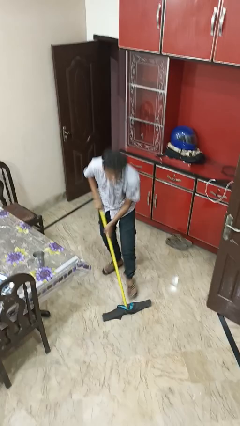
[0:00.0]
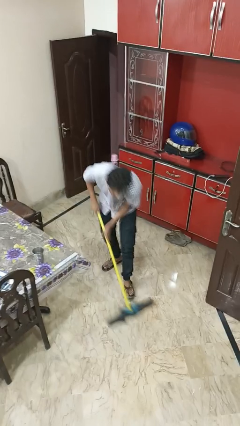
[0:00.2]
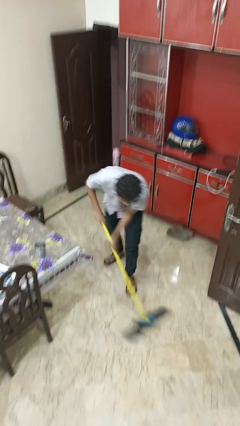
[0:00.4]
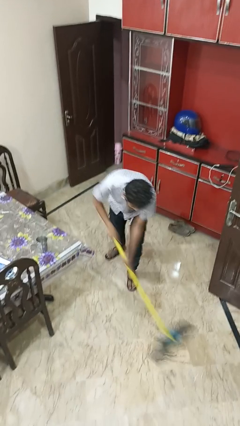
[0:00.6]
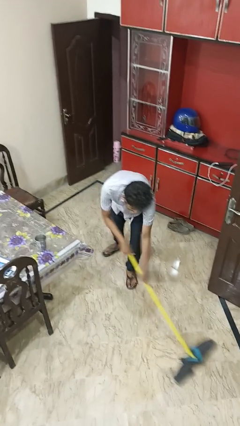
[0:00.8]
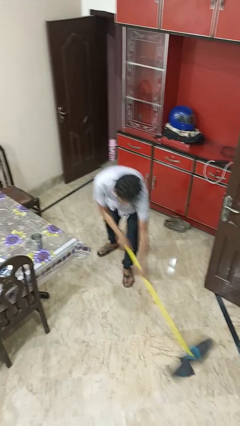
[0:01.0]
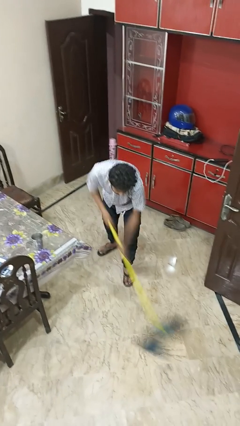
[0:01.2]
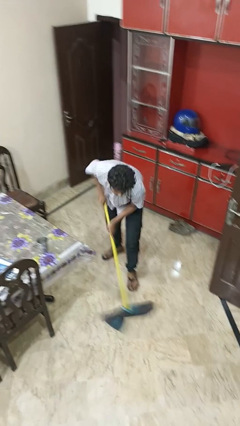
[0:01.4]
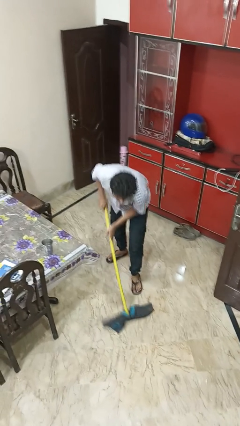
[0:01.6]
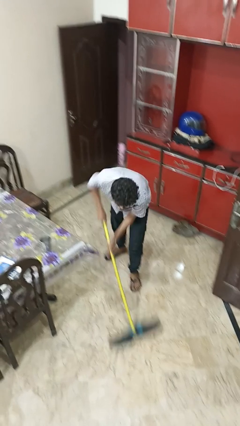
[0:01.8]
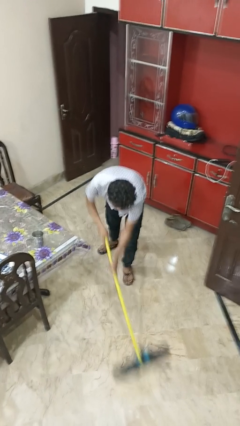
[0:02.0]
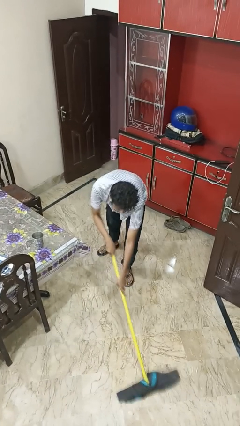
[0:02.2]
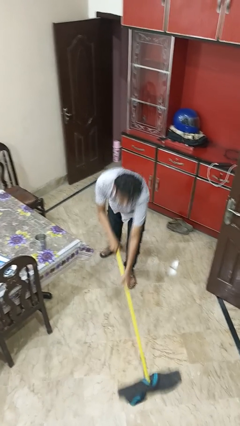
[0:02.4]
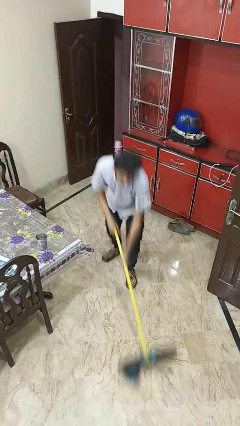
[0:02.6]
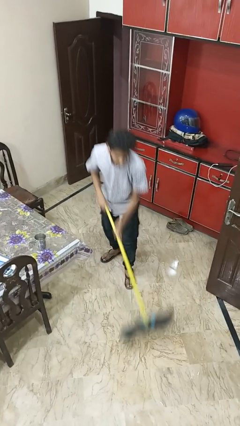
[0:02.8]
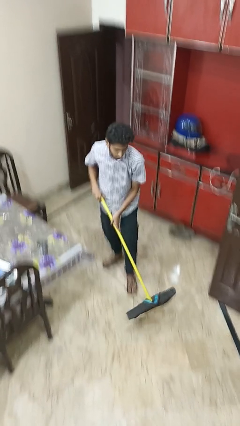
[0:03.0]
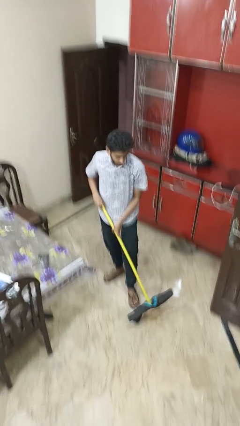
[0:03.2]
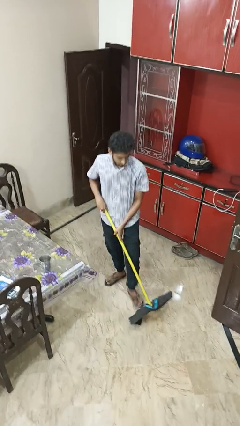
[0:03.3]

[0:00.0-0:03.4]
person mops

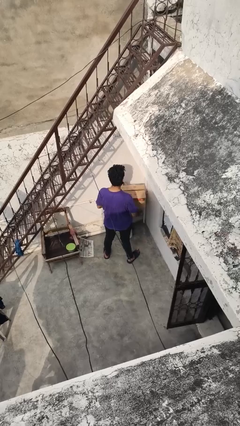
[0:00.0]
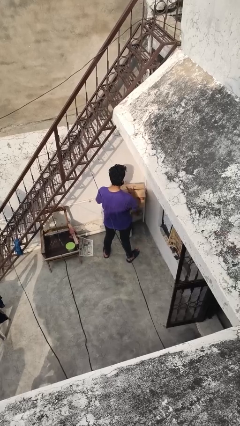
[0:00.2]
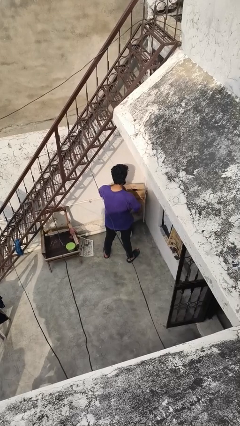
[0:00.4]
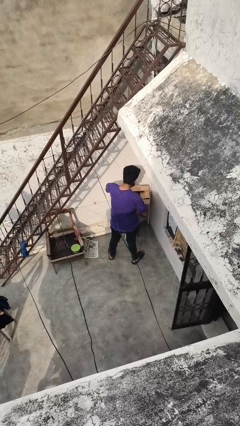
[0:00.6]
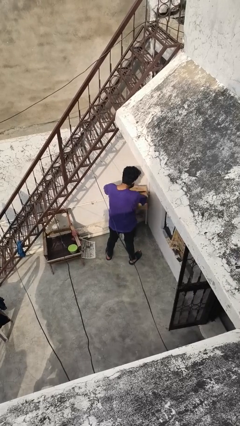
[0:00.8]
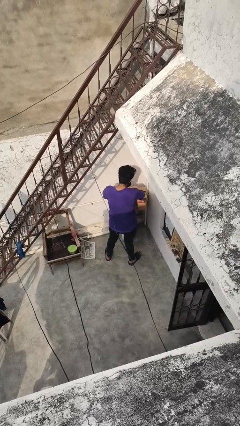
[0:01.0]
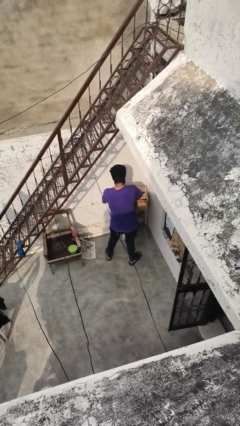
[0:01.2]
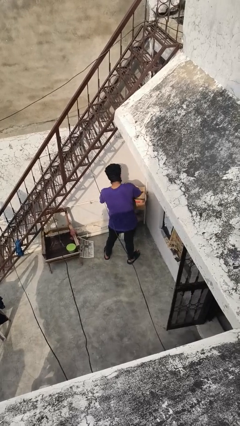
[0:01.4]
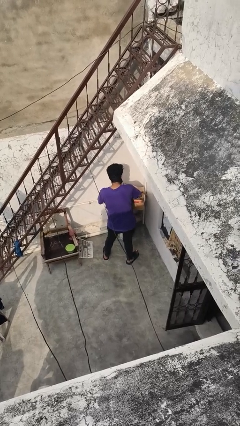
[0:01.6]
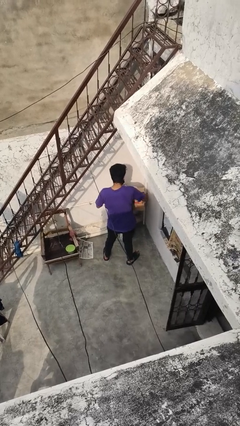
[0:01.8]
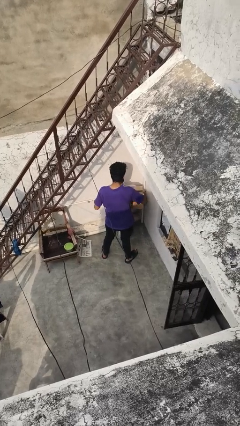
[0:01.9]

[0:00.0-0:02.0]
person searches in box

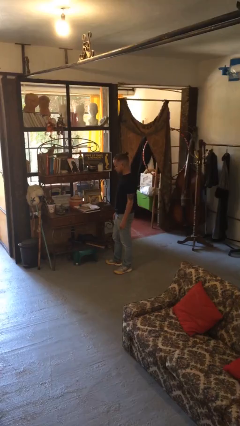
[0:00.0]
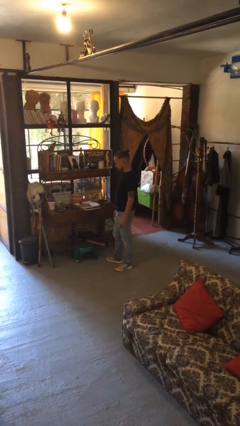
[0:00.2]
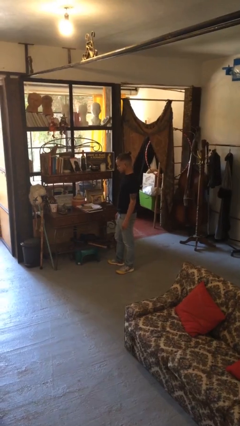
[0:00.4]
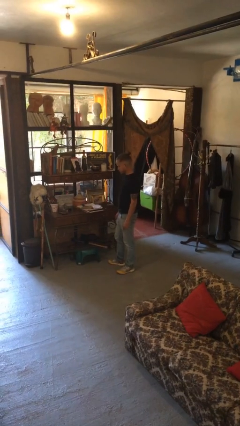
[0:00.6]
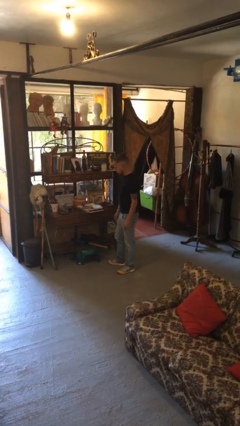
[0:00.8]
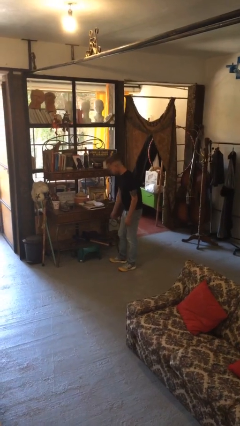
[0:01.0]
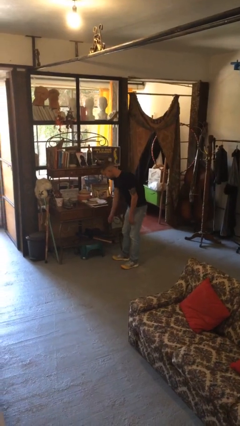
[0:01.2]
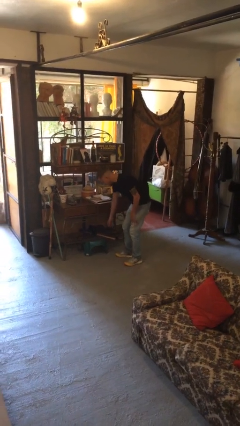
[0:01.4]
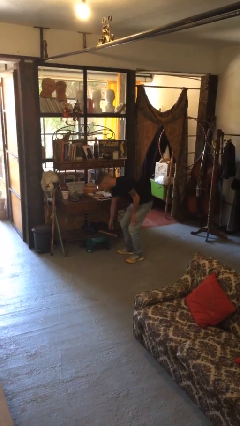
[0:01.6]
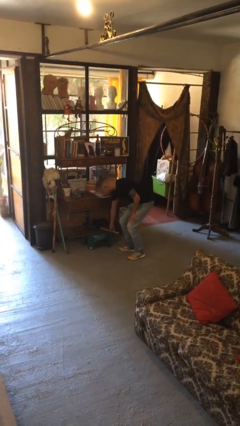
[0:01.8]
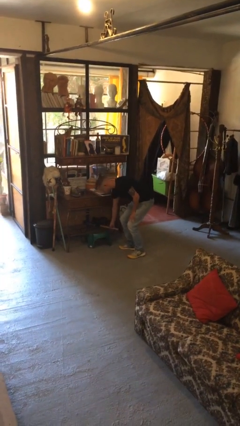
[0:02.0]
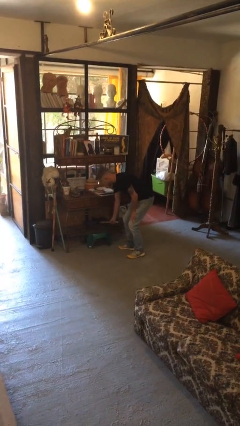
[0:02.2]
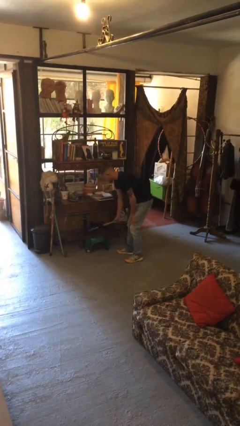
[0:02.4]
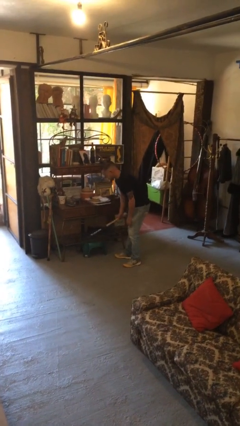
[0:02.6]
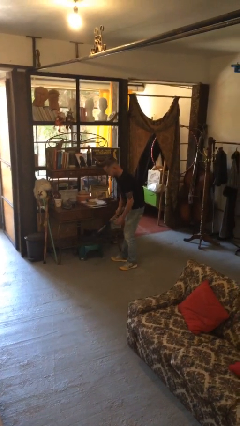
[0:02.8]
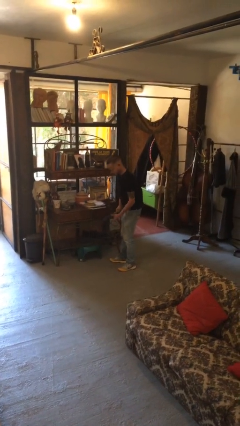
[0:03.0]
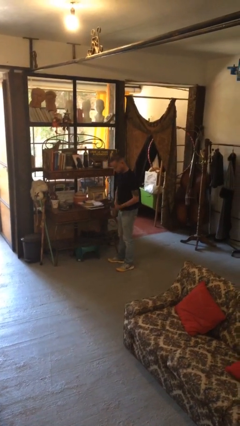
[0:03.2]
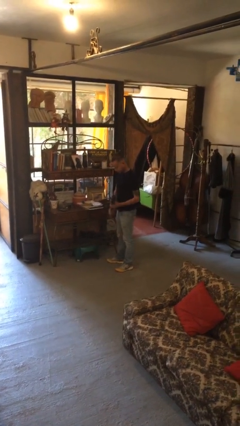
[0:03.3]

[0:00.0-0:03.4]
person picks up object from cabinet

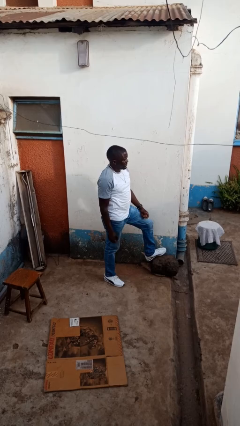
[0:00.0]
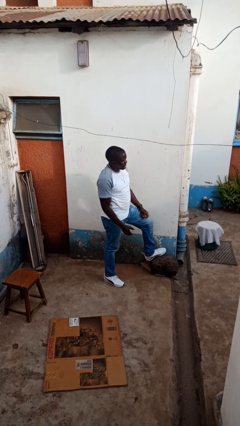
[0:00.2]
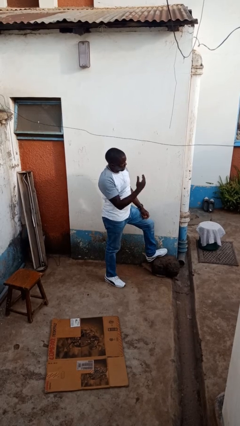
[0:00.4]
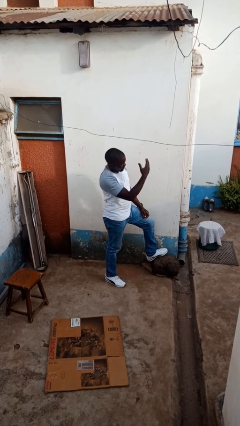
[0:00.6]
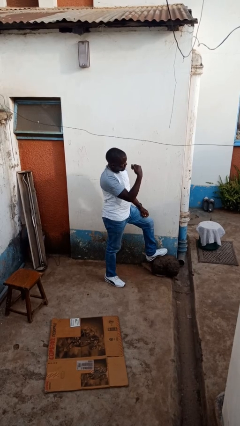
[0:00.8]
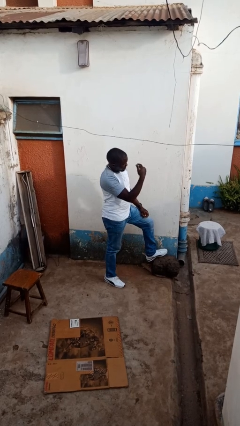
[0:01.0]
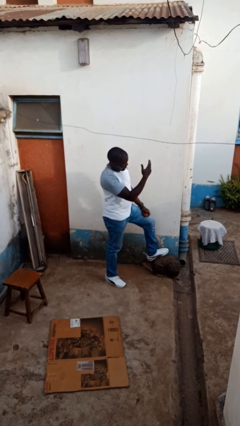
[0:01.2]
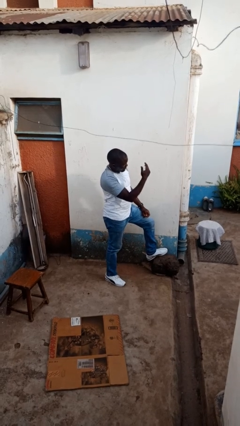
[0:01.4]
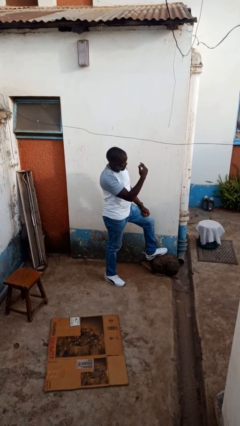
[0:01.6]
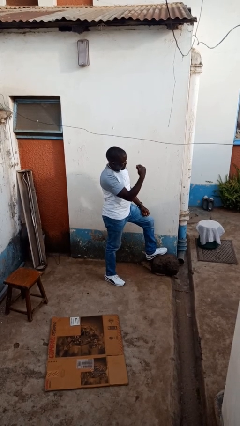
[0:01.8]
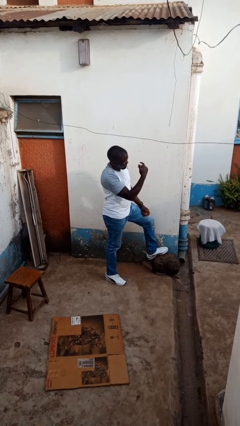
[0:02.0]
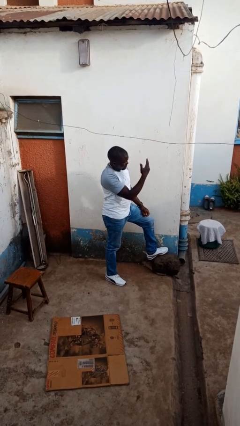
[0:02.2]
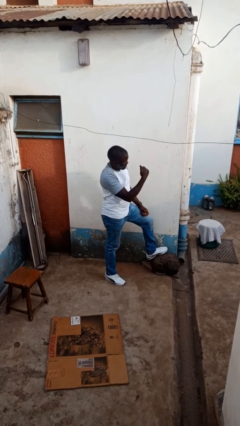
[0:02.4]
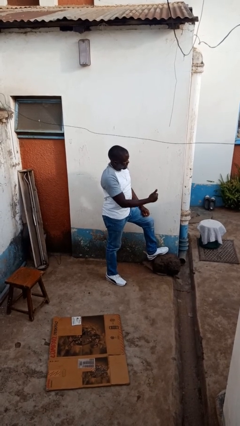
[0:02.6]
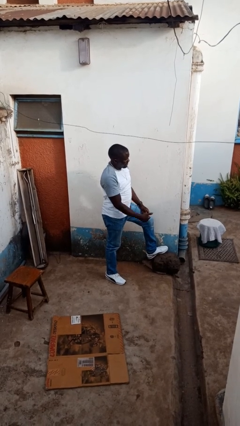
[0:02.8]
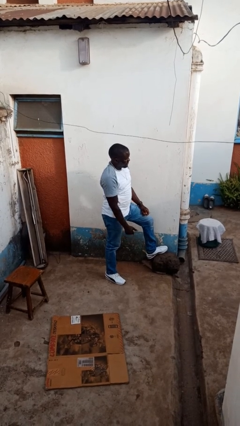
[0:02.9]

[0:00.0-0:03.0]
person gestures come here

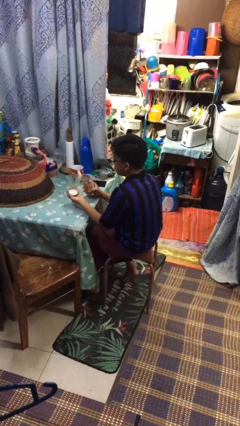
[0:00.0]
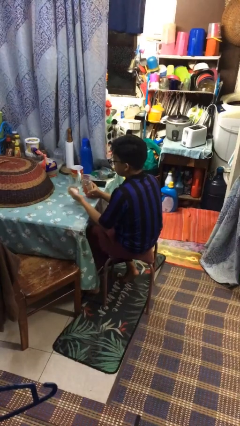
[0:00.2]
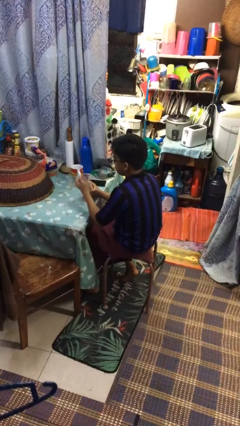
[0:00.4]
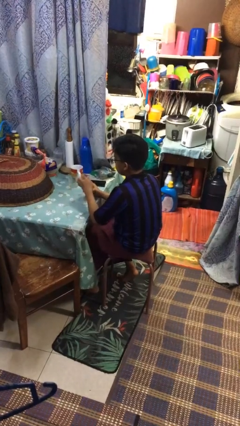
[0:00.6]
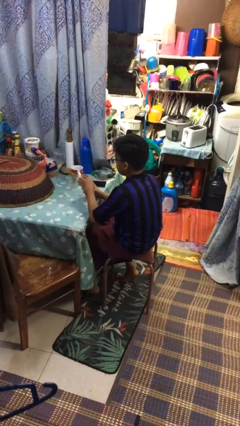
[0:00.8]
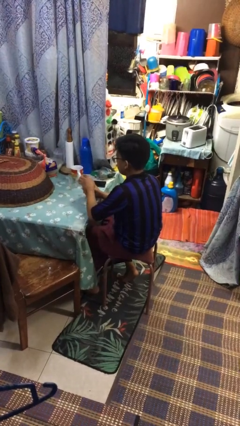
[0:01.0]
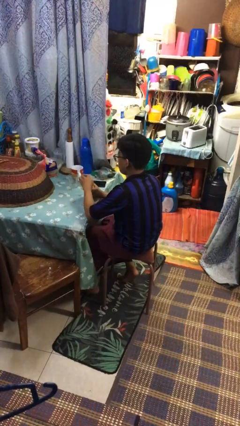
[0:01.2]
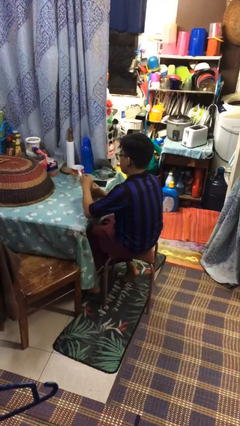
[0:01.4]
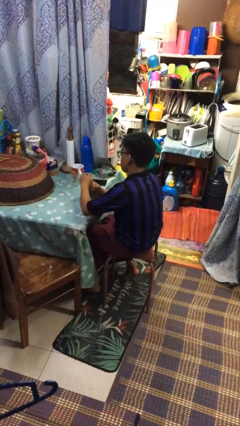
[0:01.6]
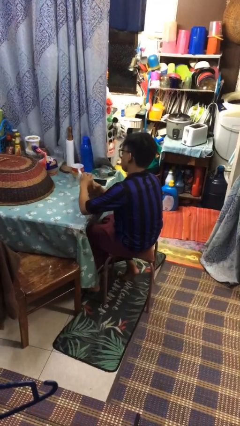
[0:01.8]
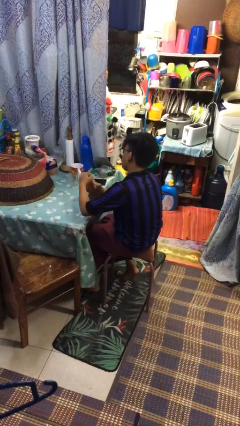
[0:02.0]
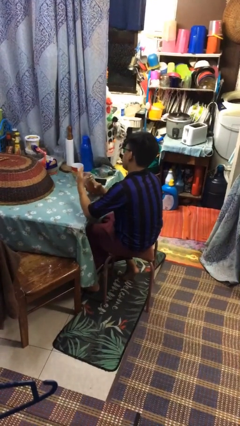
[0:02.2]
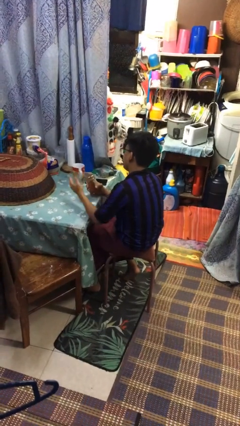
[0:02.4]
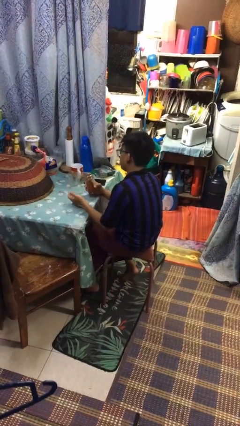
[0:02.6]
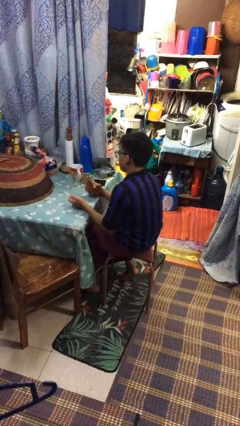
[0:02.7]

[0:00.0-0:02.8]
person closes jar

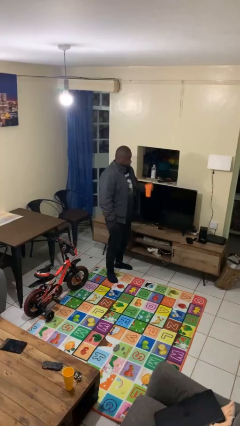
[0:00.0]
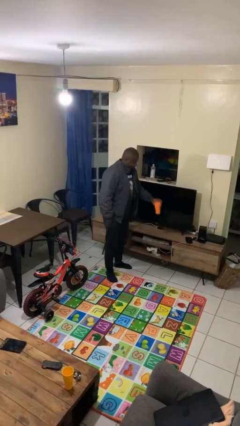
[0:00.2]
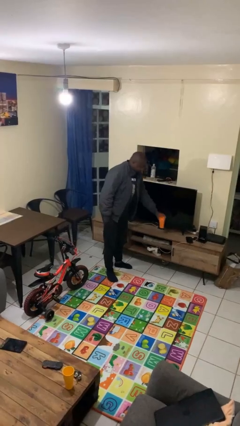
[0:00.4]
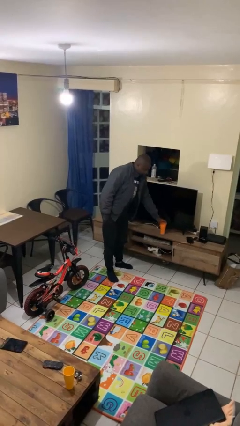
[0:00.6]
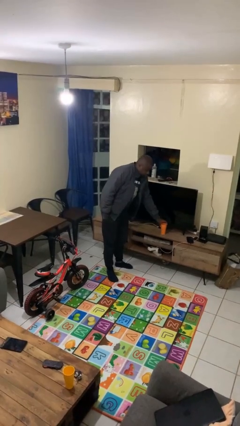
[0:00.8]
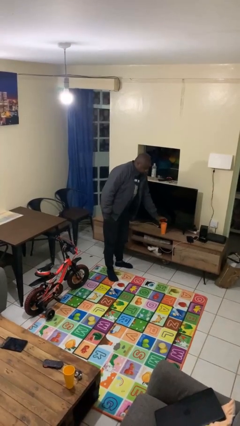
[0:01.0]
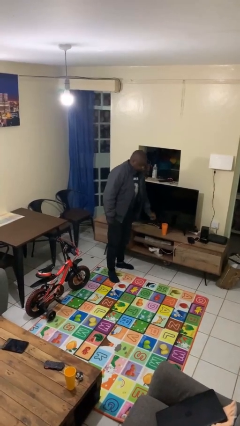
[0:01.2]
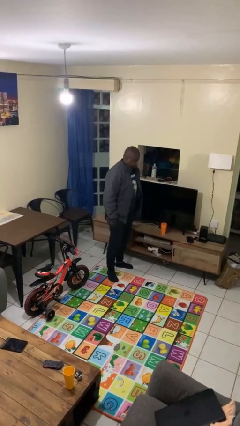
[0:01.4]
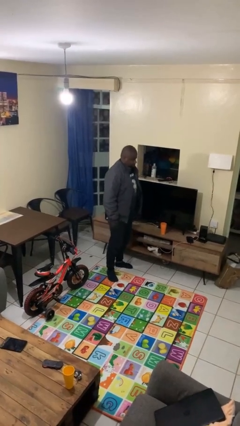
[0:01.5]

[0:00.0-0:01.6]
person puts down object on countertop

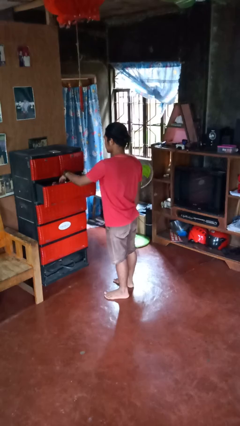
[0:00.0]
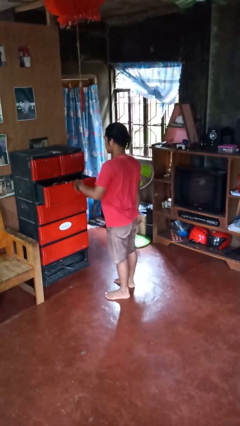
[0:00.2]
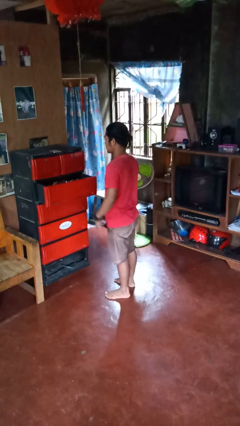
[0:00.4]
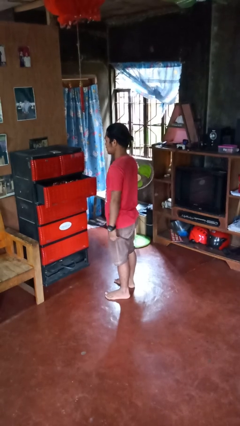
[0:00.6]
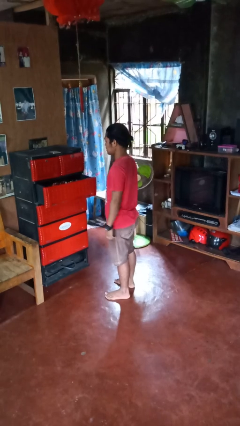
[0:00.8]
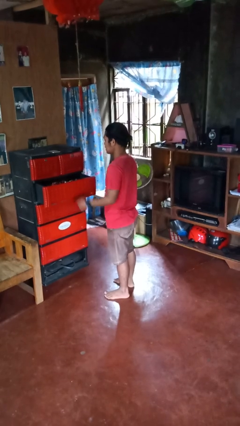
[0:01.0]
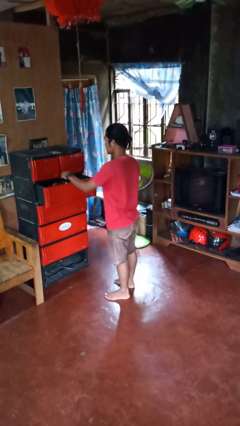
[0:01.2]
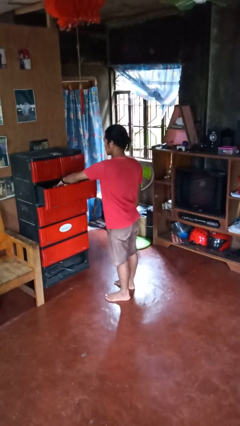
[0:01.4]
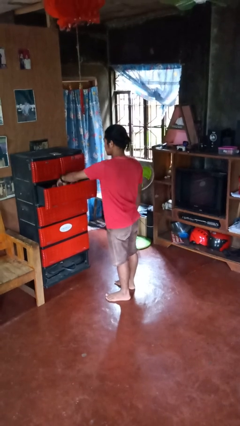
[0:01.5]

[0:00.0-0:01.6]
person puts clothes into dresser
